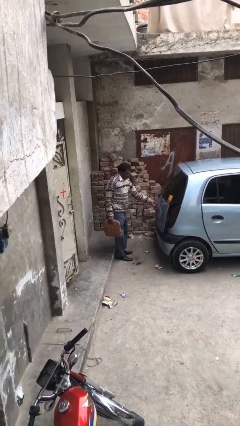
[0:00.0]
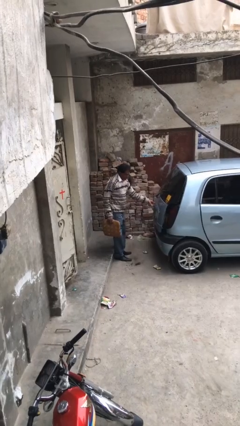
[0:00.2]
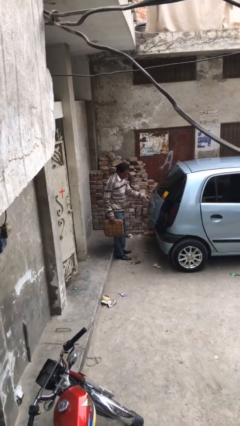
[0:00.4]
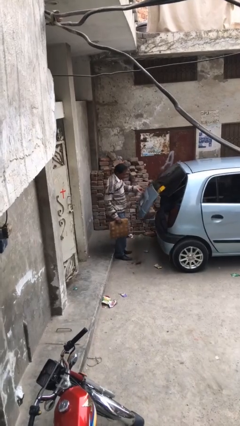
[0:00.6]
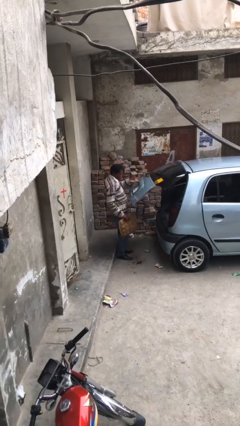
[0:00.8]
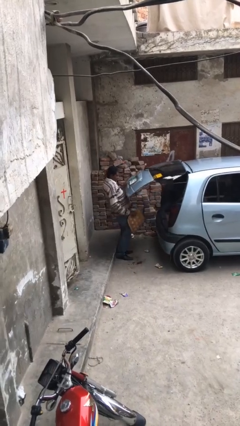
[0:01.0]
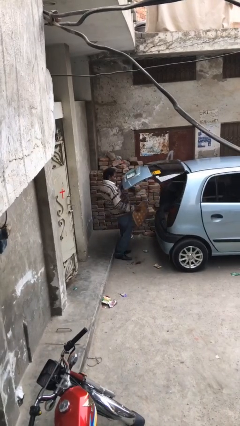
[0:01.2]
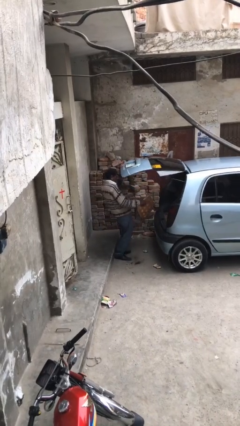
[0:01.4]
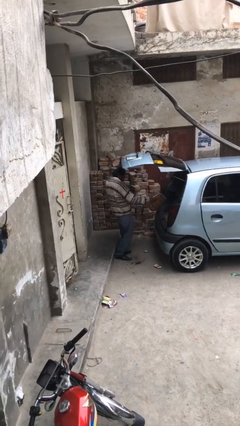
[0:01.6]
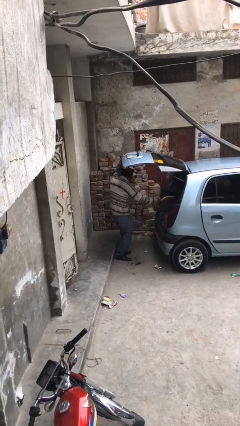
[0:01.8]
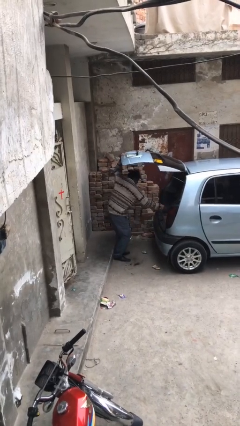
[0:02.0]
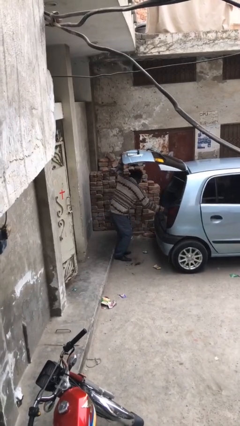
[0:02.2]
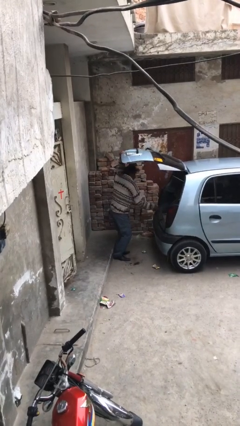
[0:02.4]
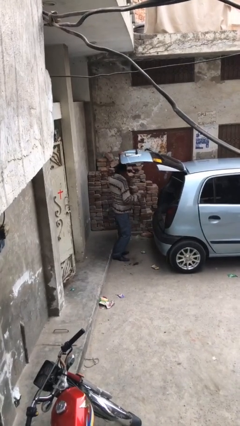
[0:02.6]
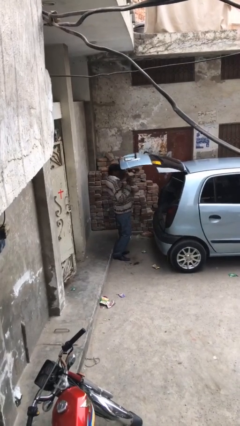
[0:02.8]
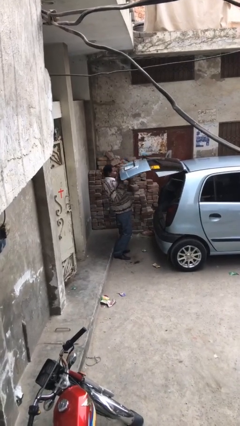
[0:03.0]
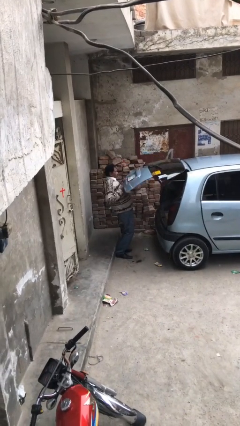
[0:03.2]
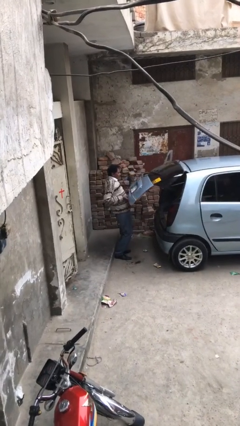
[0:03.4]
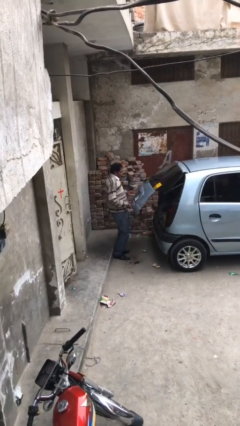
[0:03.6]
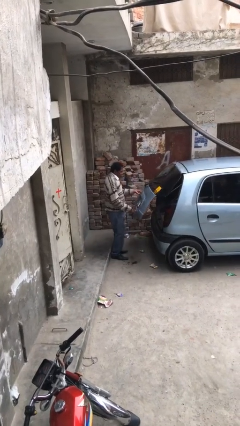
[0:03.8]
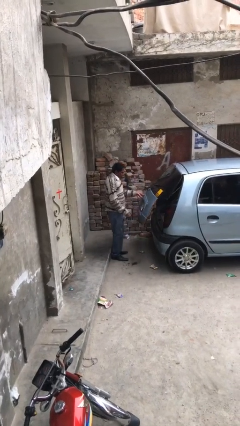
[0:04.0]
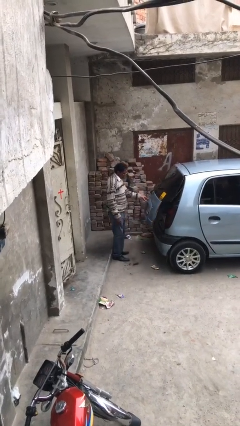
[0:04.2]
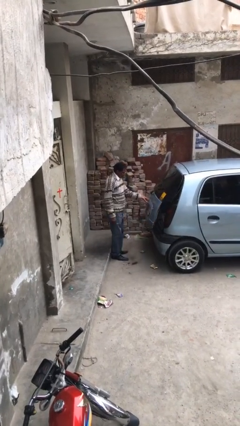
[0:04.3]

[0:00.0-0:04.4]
person loads car

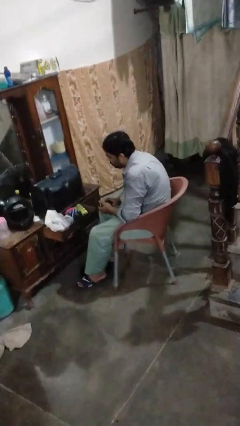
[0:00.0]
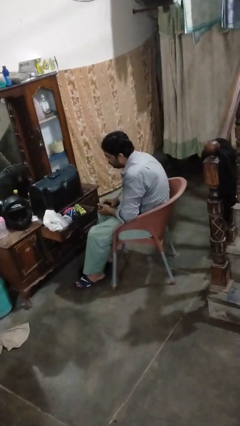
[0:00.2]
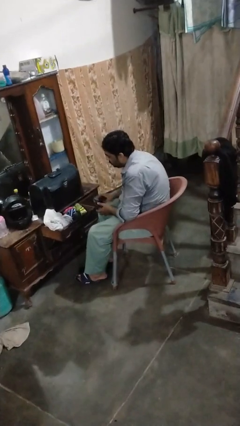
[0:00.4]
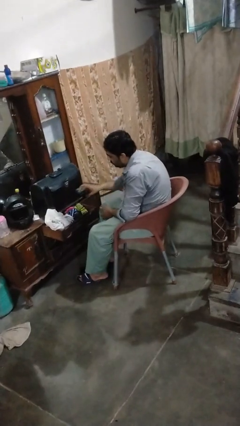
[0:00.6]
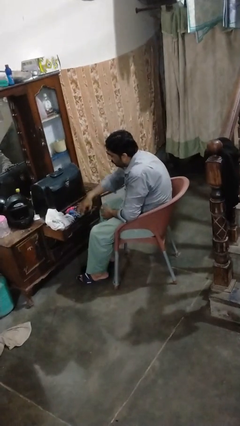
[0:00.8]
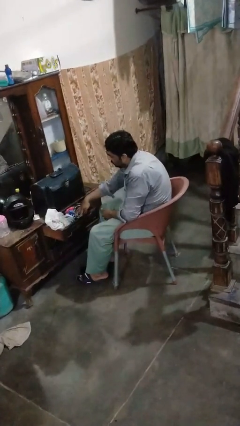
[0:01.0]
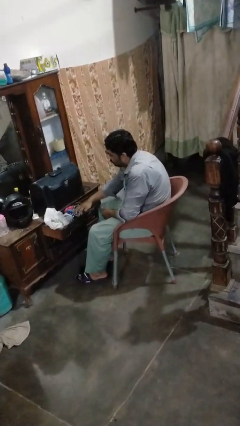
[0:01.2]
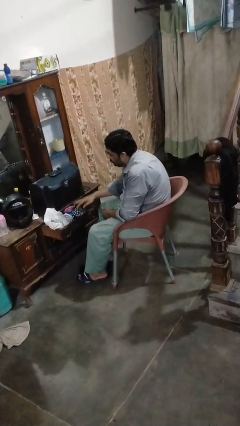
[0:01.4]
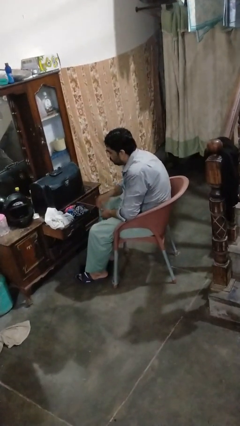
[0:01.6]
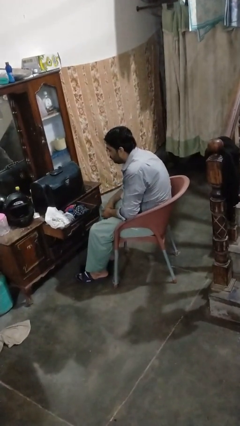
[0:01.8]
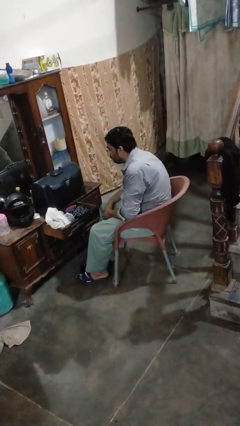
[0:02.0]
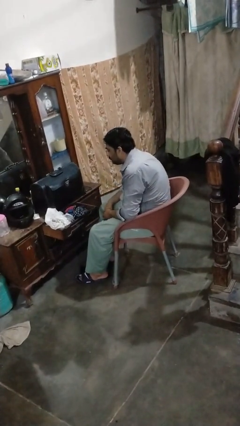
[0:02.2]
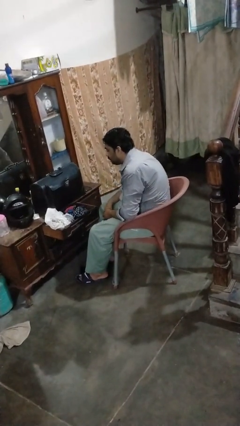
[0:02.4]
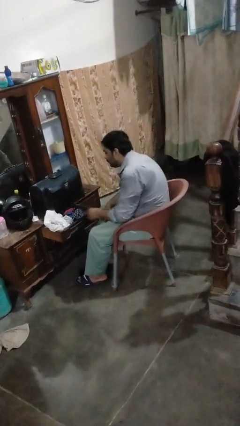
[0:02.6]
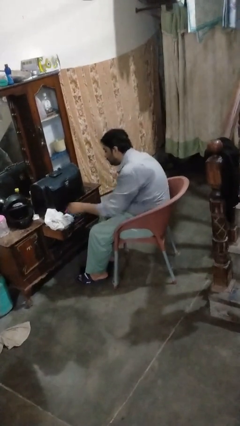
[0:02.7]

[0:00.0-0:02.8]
person puts clothes into dresser

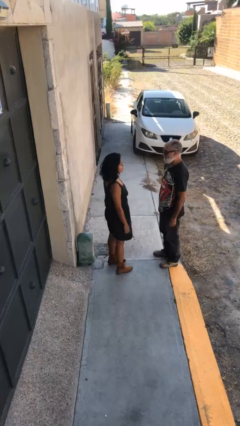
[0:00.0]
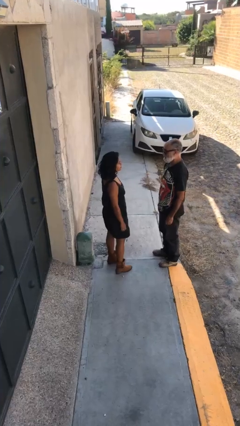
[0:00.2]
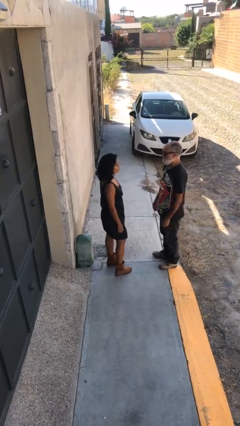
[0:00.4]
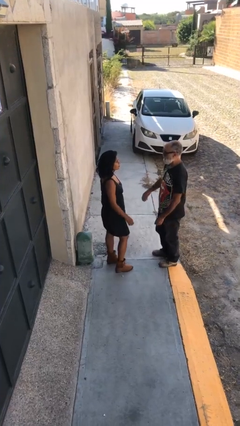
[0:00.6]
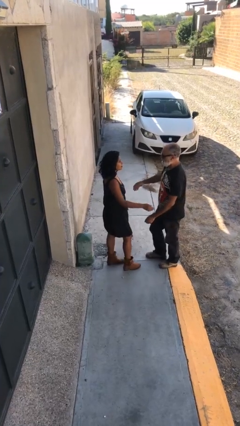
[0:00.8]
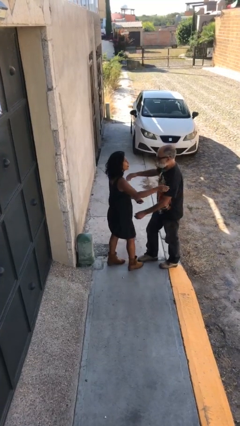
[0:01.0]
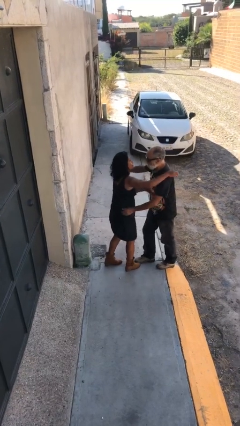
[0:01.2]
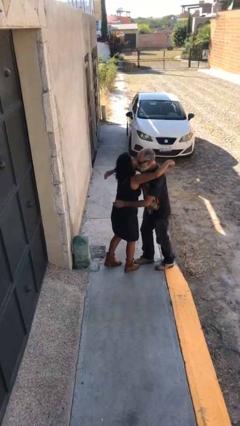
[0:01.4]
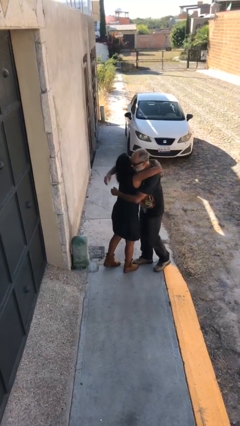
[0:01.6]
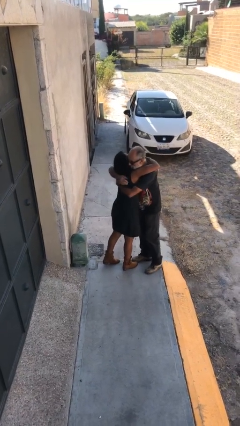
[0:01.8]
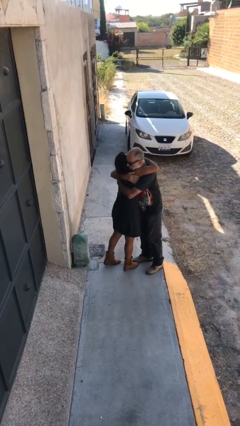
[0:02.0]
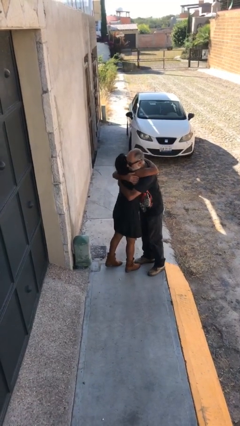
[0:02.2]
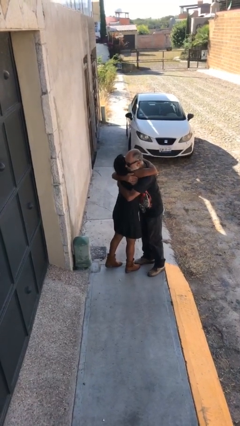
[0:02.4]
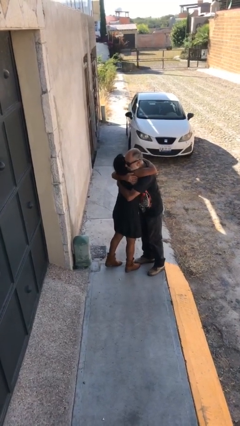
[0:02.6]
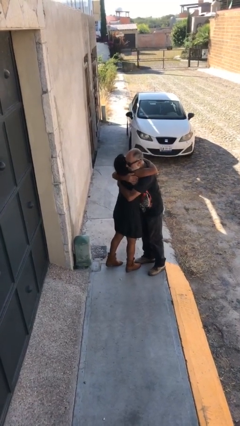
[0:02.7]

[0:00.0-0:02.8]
person embraces person

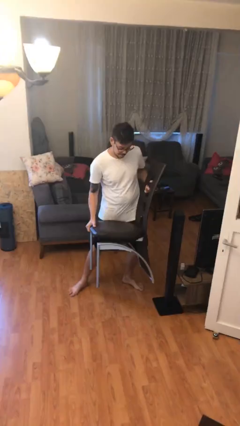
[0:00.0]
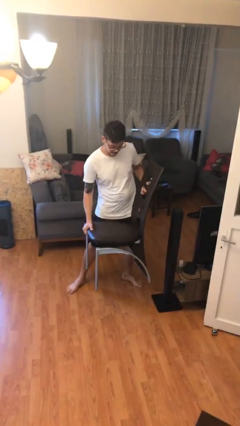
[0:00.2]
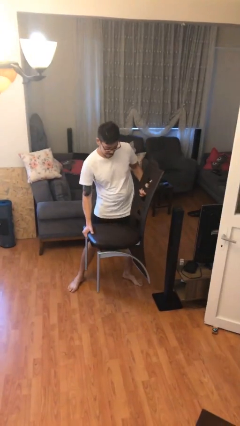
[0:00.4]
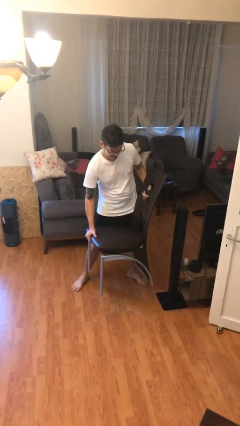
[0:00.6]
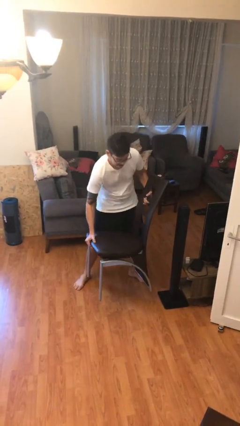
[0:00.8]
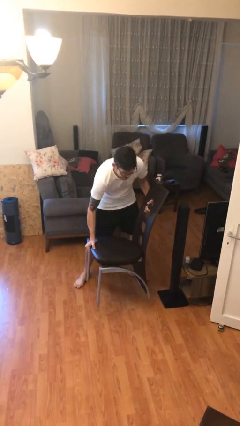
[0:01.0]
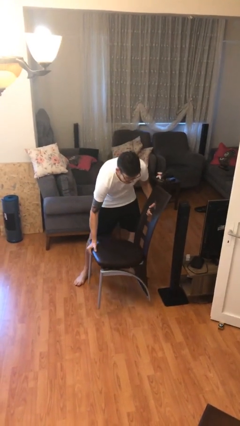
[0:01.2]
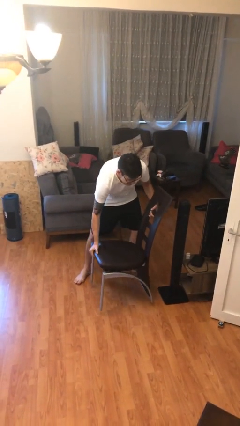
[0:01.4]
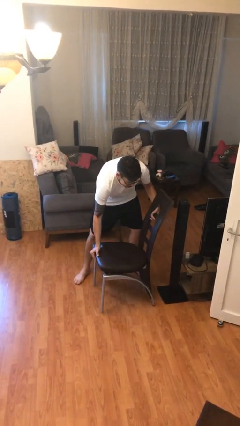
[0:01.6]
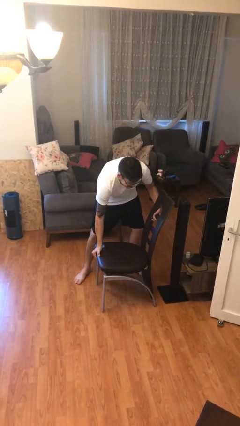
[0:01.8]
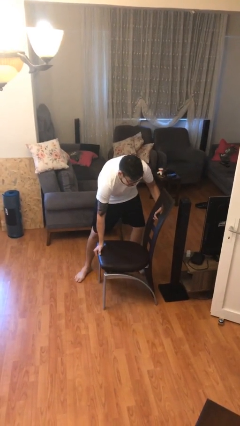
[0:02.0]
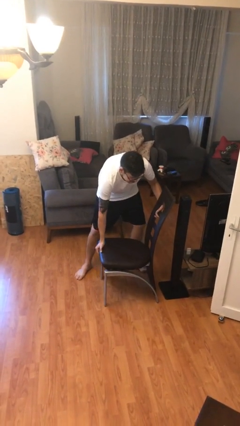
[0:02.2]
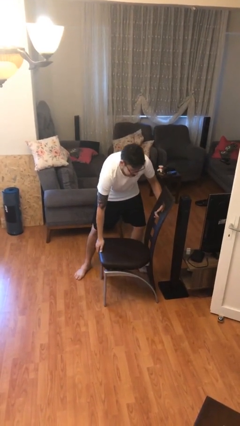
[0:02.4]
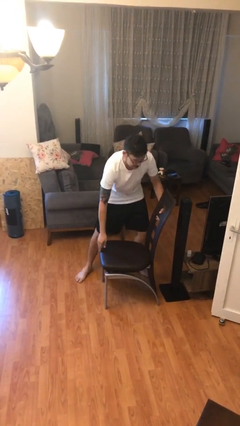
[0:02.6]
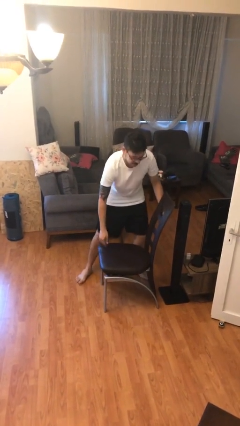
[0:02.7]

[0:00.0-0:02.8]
person puts down object on floor

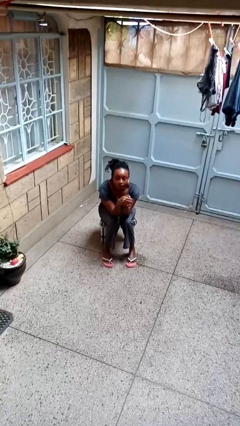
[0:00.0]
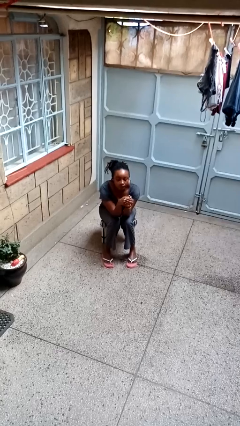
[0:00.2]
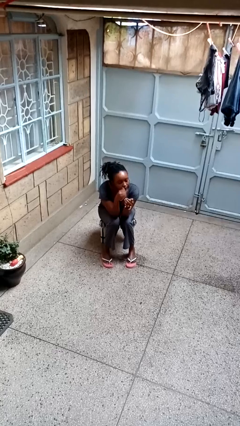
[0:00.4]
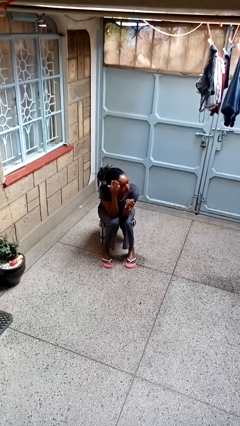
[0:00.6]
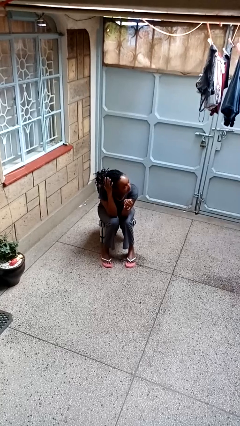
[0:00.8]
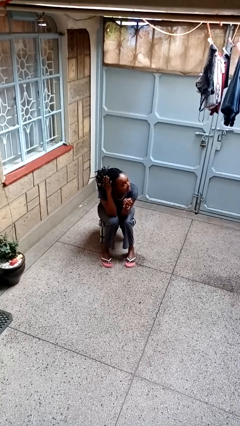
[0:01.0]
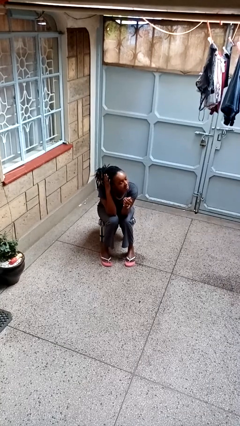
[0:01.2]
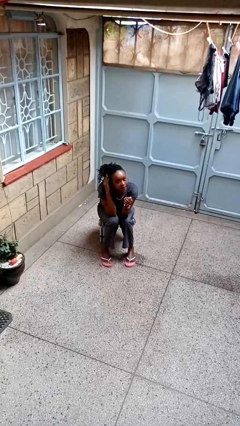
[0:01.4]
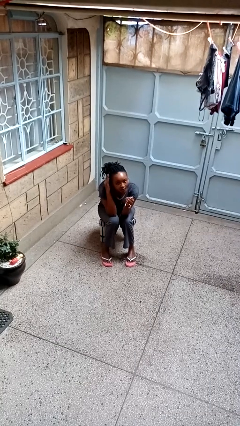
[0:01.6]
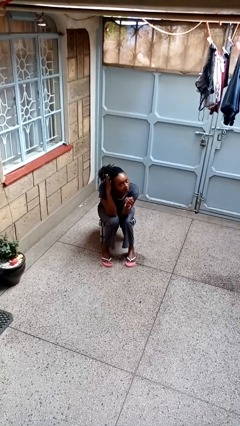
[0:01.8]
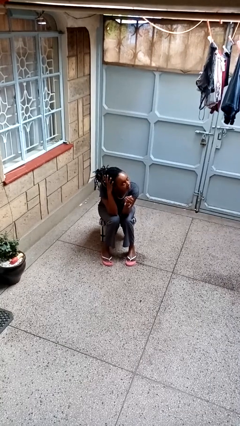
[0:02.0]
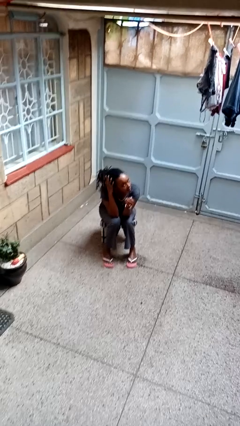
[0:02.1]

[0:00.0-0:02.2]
person strokes hair

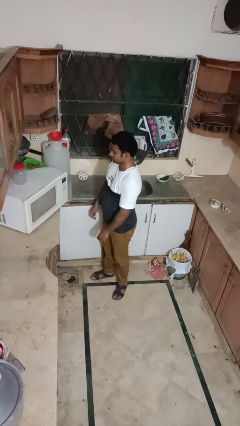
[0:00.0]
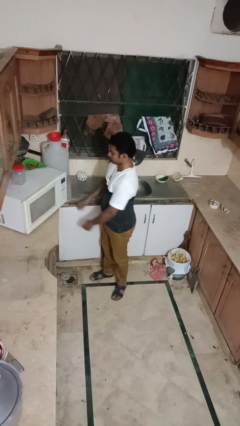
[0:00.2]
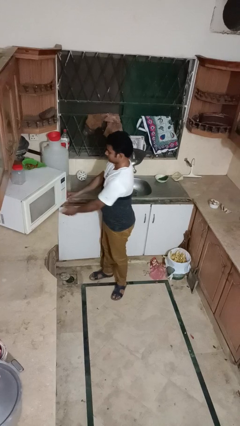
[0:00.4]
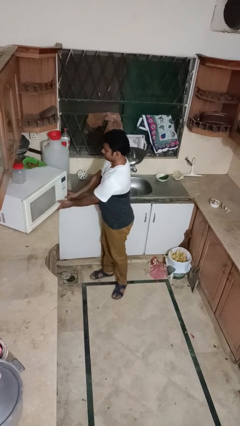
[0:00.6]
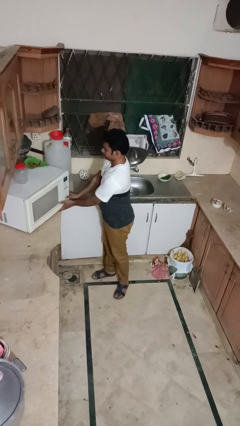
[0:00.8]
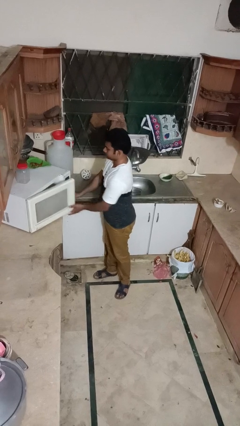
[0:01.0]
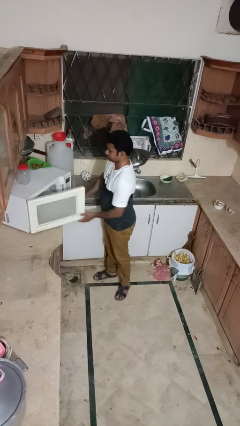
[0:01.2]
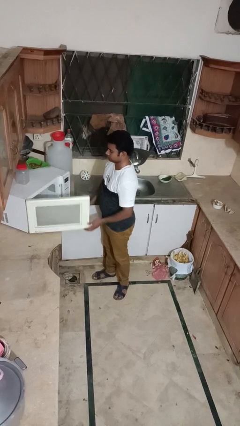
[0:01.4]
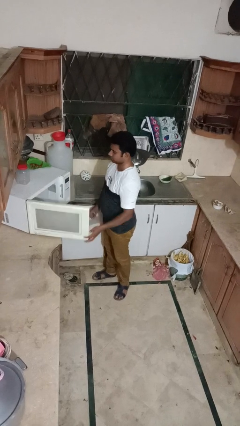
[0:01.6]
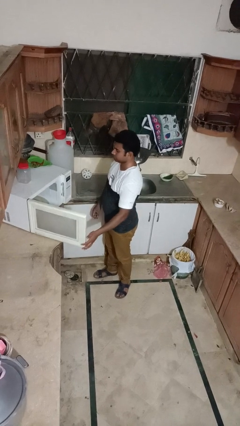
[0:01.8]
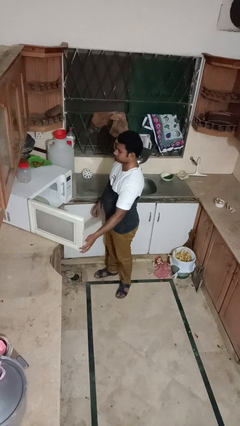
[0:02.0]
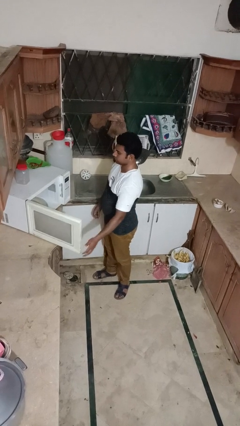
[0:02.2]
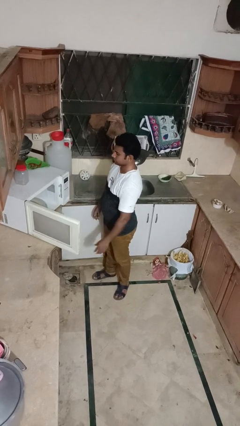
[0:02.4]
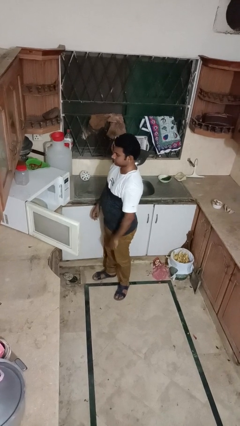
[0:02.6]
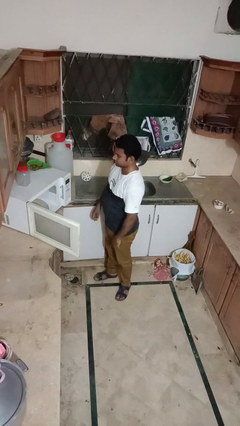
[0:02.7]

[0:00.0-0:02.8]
person opens oven door
